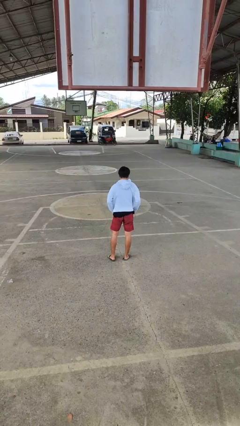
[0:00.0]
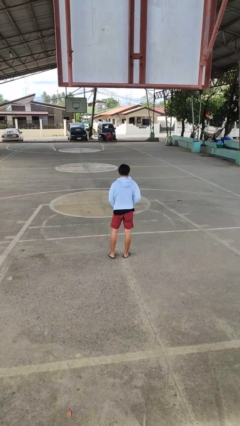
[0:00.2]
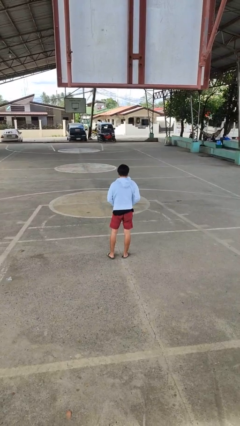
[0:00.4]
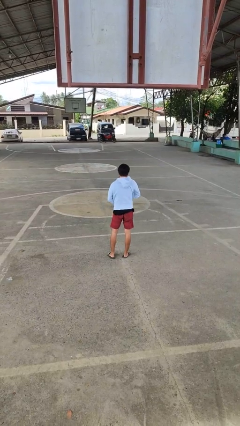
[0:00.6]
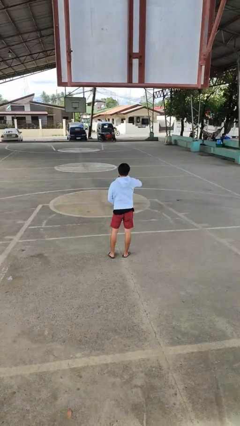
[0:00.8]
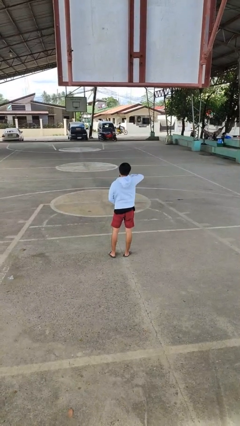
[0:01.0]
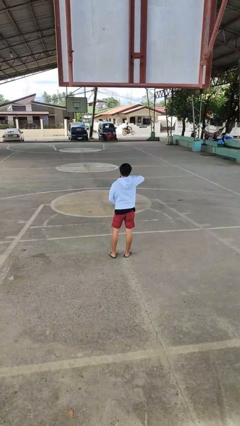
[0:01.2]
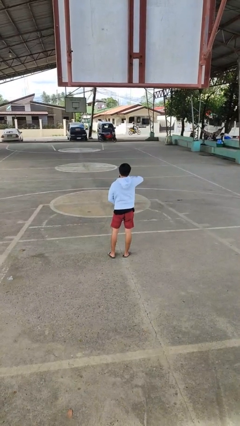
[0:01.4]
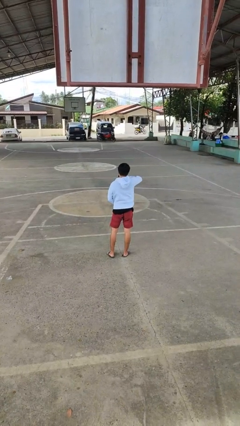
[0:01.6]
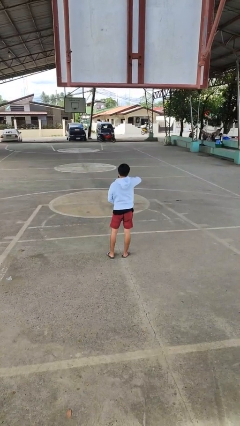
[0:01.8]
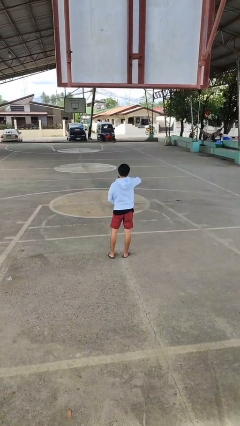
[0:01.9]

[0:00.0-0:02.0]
person zips up jacket

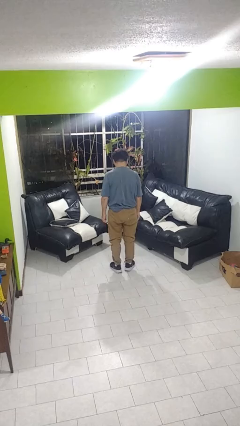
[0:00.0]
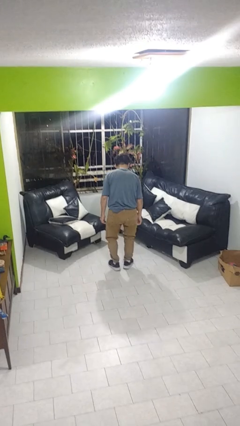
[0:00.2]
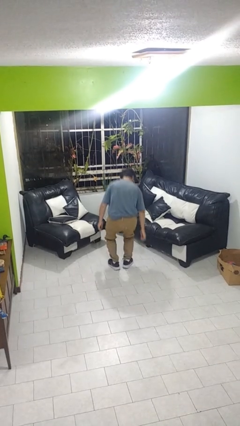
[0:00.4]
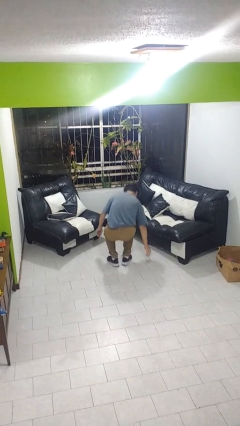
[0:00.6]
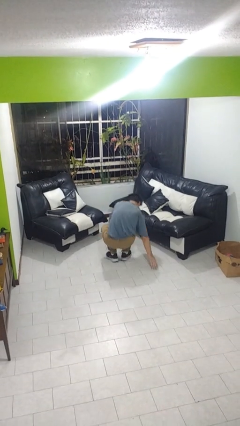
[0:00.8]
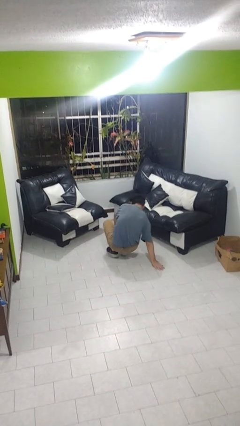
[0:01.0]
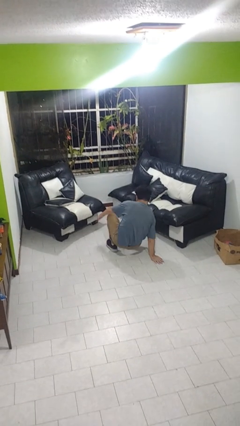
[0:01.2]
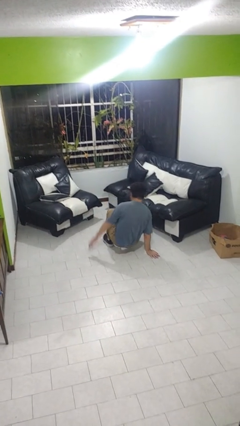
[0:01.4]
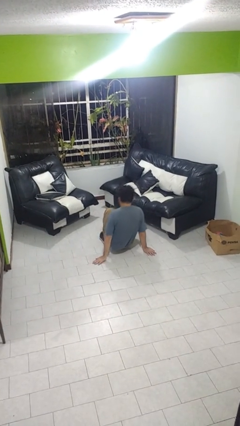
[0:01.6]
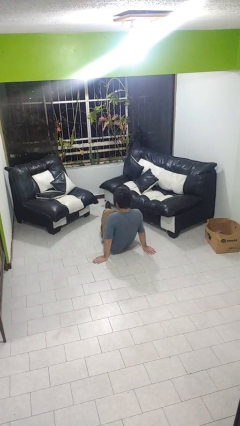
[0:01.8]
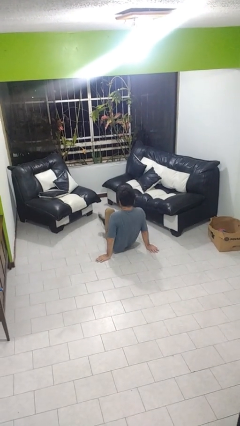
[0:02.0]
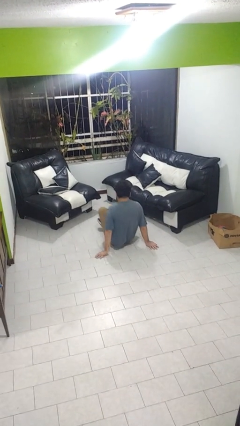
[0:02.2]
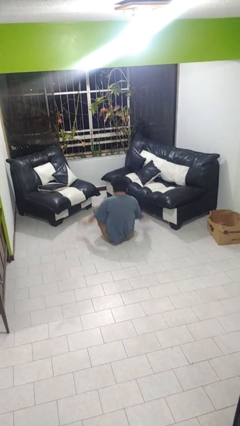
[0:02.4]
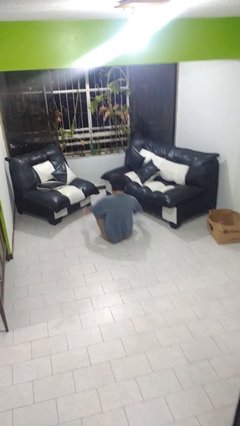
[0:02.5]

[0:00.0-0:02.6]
person sits crisscross

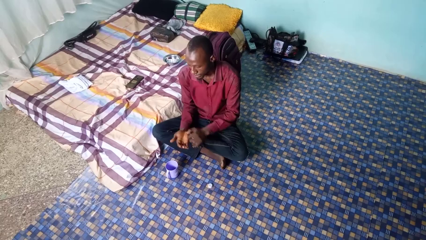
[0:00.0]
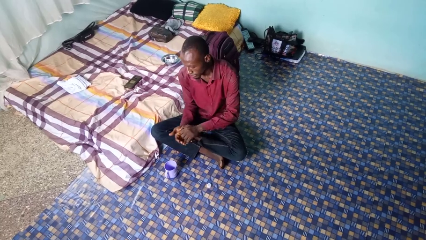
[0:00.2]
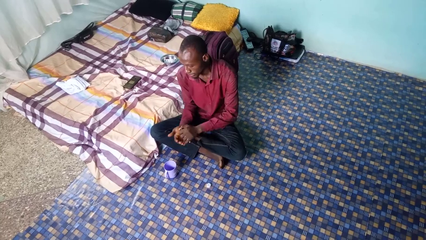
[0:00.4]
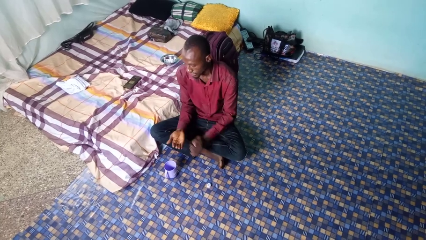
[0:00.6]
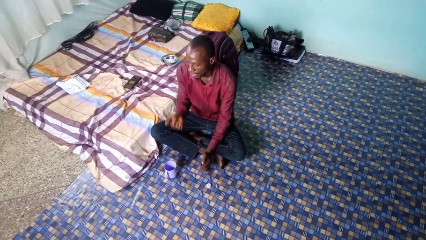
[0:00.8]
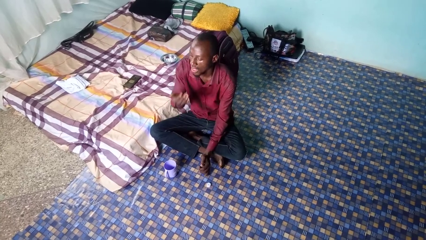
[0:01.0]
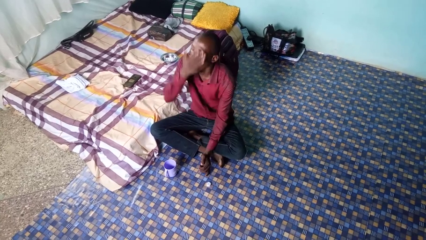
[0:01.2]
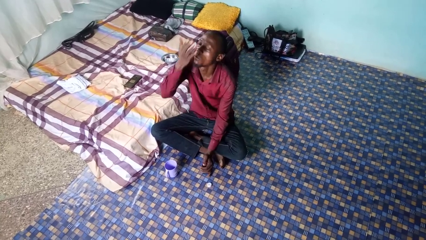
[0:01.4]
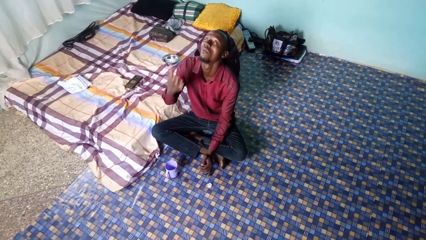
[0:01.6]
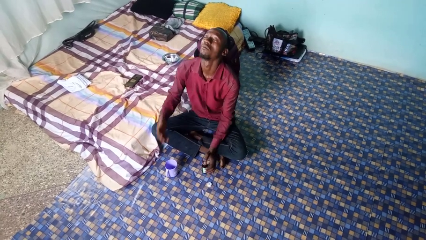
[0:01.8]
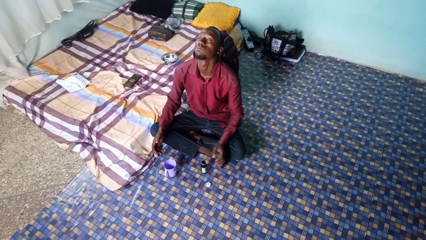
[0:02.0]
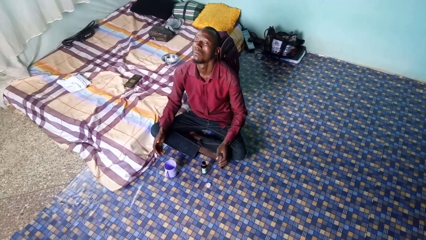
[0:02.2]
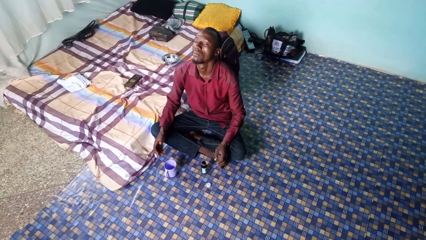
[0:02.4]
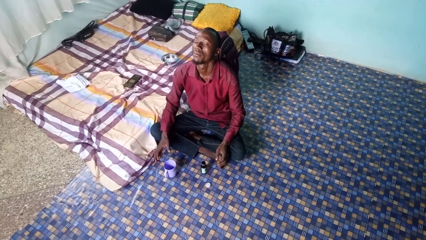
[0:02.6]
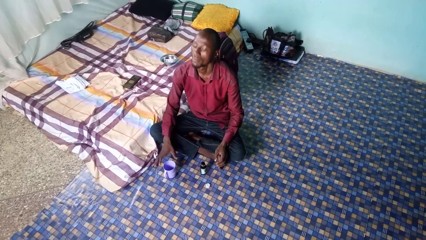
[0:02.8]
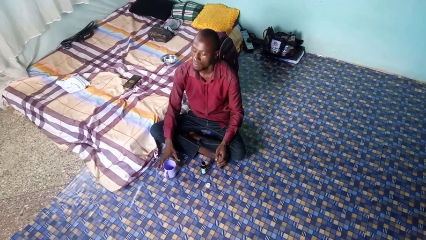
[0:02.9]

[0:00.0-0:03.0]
person takes medicine pills

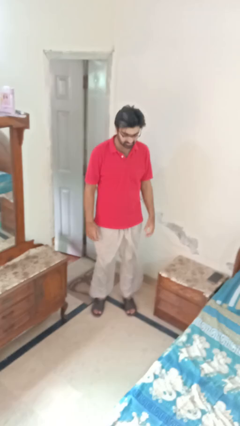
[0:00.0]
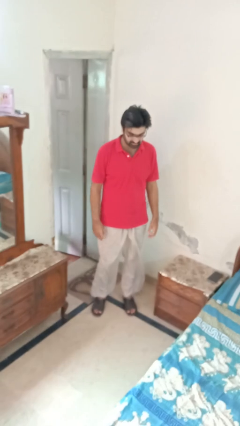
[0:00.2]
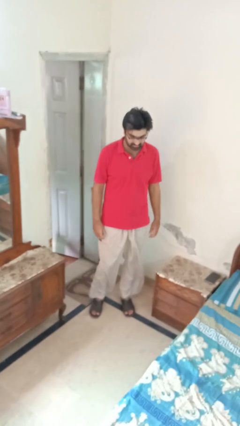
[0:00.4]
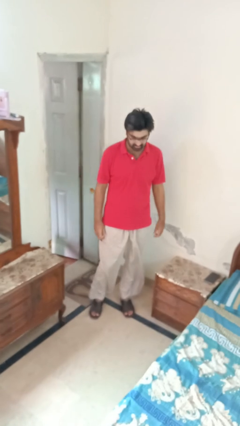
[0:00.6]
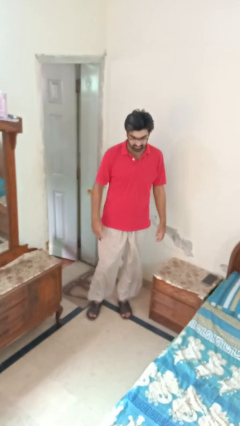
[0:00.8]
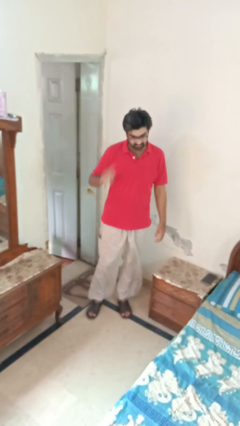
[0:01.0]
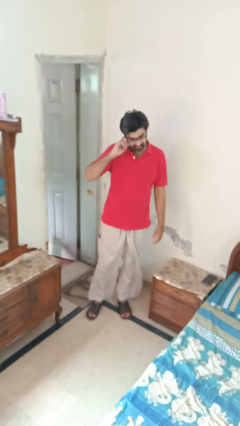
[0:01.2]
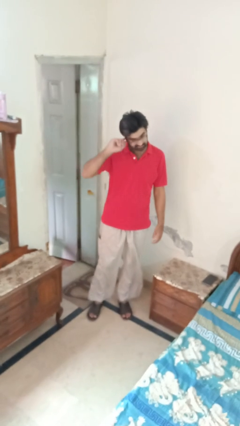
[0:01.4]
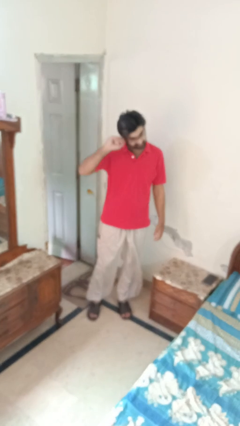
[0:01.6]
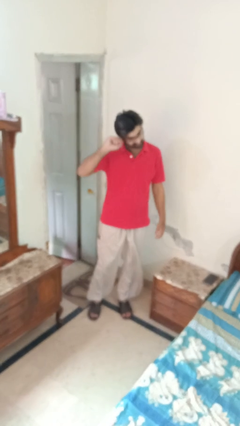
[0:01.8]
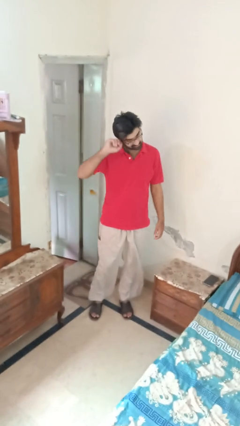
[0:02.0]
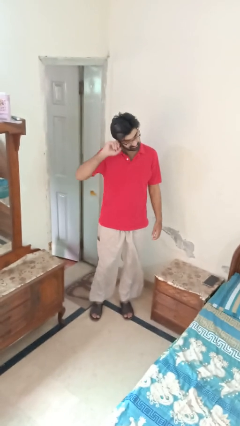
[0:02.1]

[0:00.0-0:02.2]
person touches earlobe

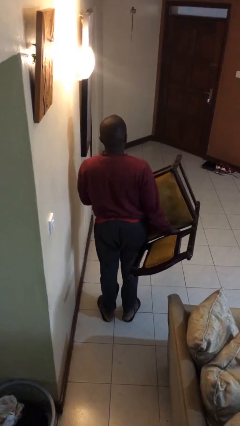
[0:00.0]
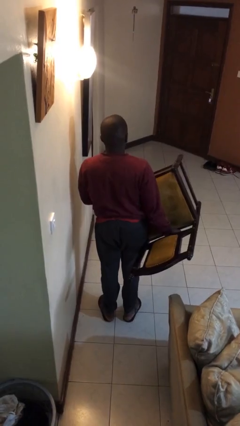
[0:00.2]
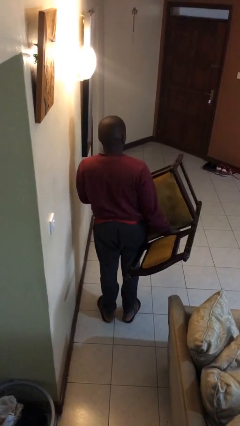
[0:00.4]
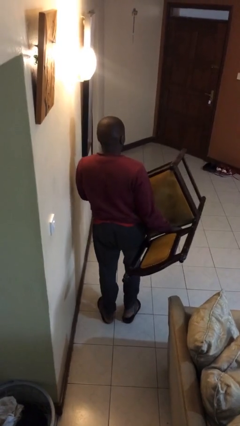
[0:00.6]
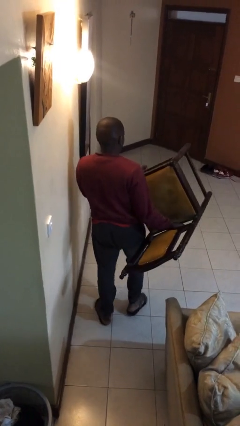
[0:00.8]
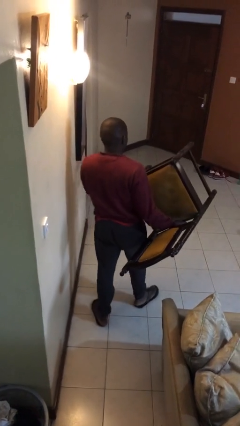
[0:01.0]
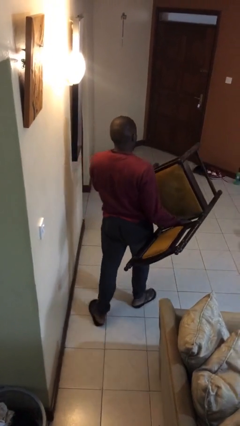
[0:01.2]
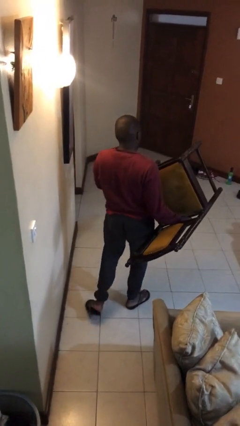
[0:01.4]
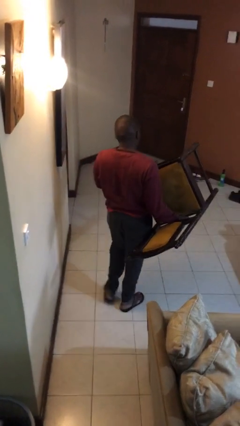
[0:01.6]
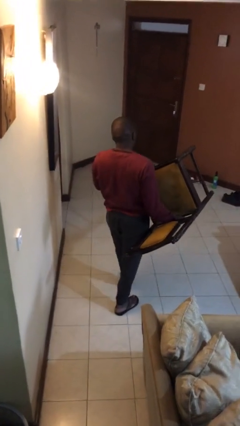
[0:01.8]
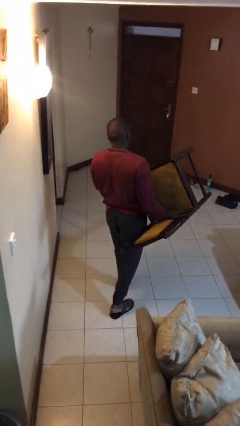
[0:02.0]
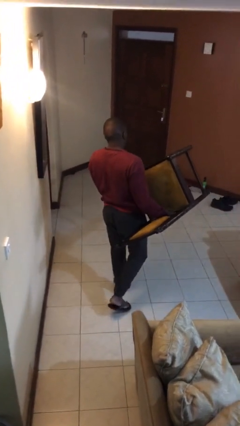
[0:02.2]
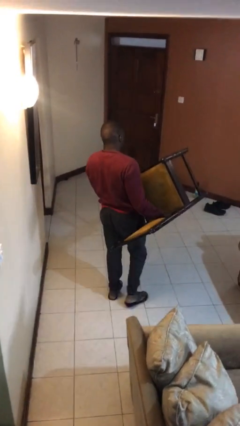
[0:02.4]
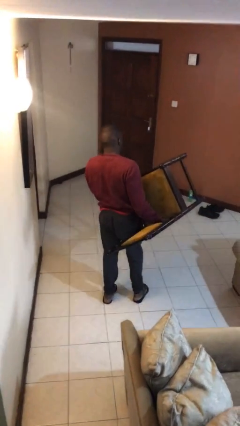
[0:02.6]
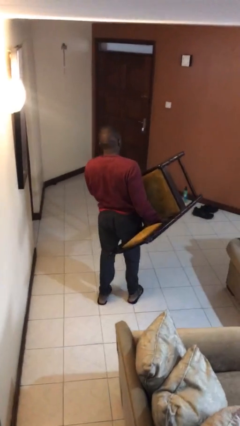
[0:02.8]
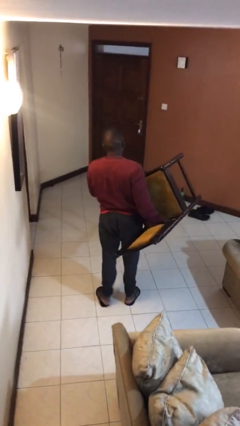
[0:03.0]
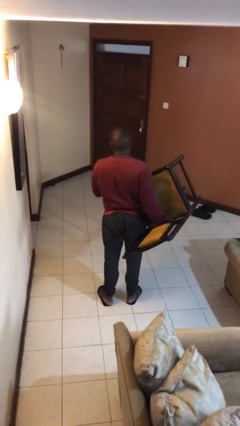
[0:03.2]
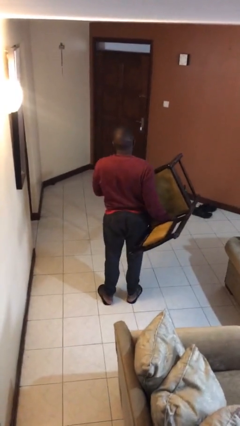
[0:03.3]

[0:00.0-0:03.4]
person carries furniture

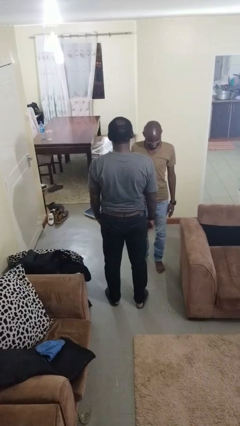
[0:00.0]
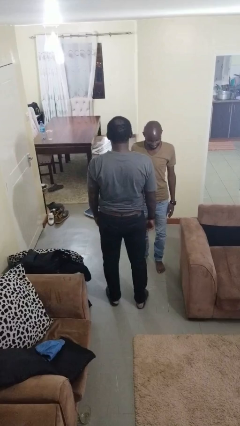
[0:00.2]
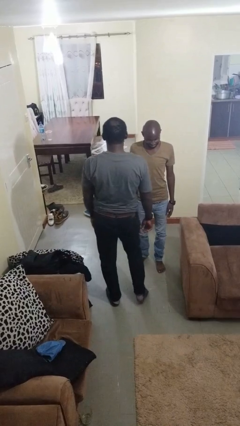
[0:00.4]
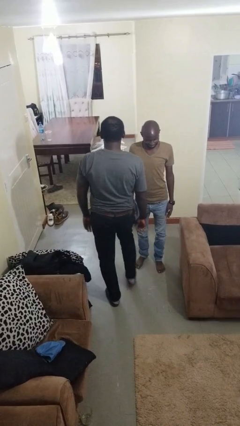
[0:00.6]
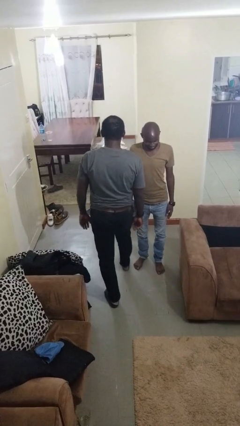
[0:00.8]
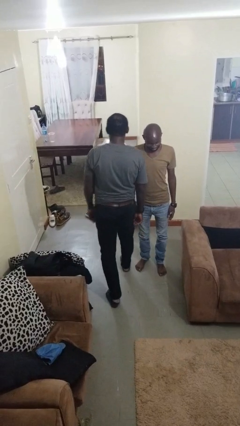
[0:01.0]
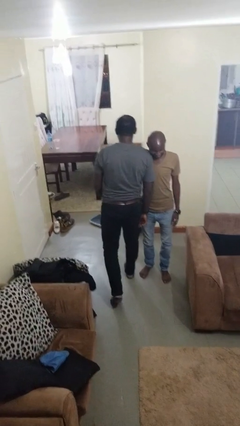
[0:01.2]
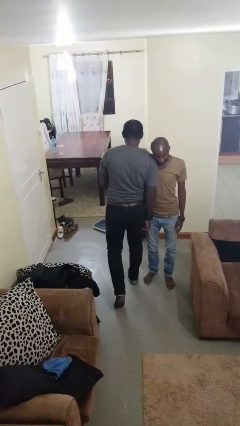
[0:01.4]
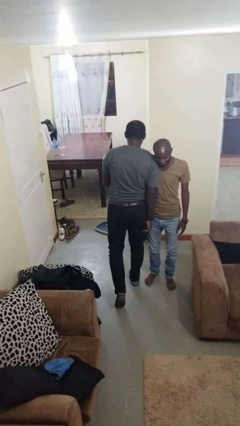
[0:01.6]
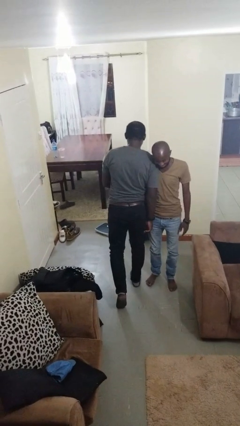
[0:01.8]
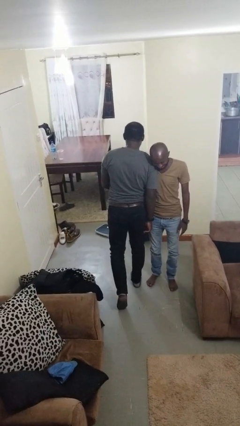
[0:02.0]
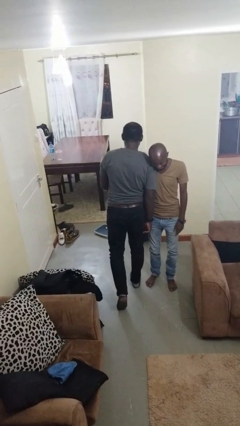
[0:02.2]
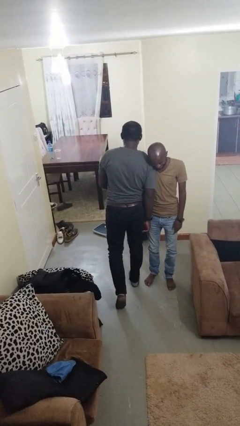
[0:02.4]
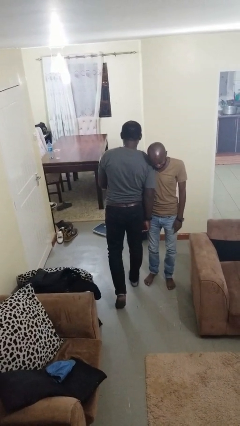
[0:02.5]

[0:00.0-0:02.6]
person bumps into person

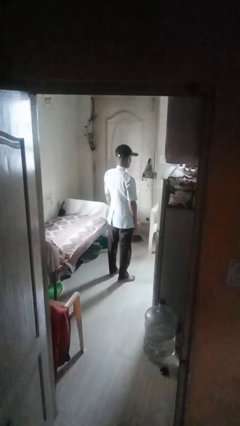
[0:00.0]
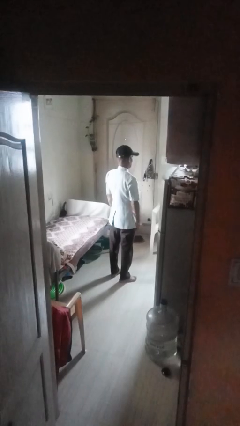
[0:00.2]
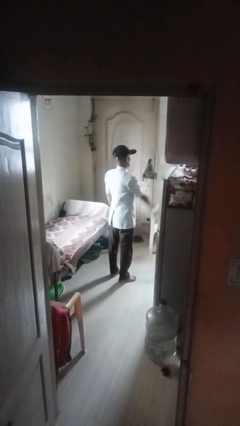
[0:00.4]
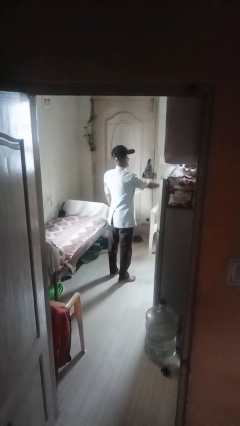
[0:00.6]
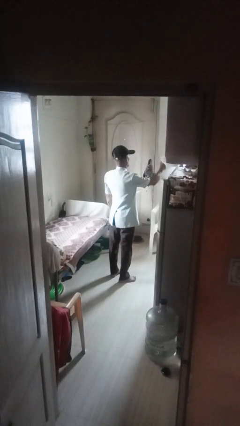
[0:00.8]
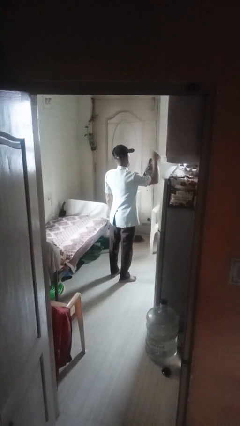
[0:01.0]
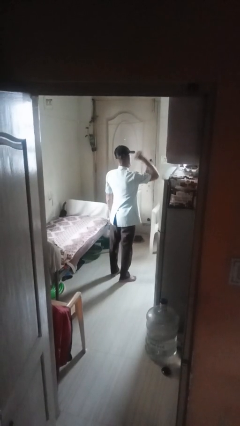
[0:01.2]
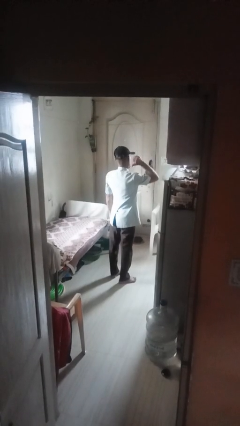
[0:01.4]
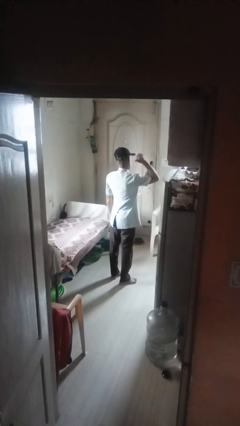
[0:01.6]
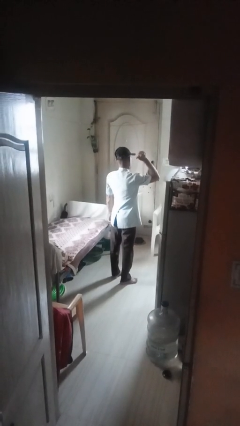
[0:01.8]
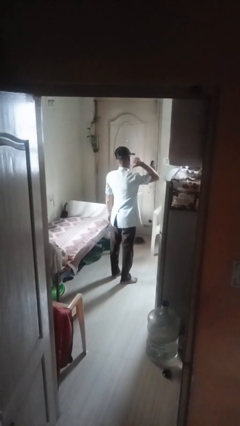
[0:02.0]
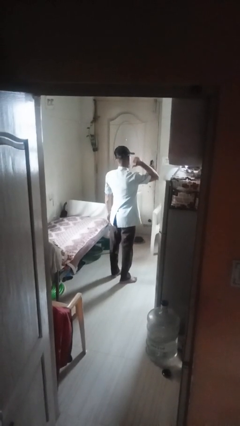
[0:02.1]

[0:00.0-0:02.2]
person gestures behind me
